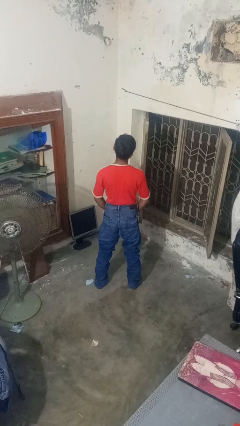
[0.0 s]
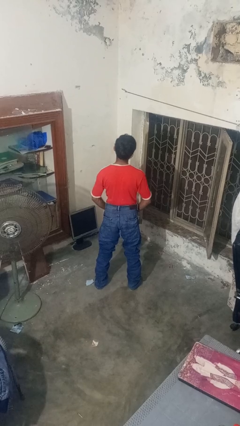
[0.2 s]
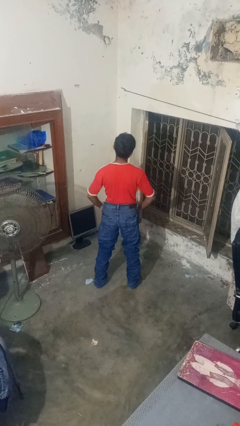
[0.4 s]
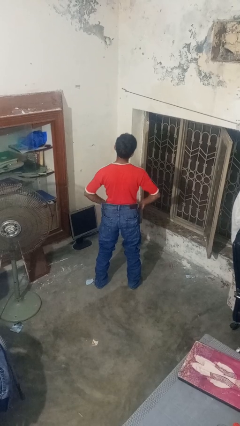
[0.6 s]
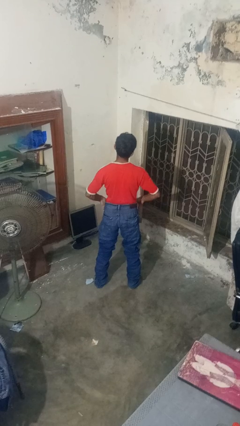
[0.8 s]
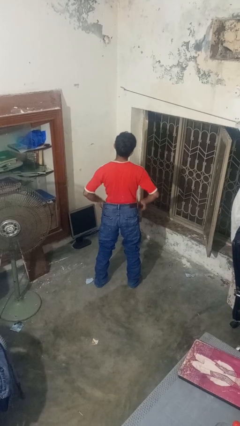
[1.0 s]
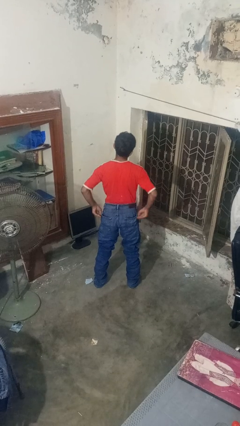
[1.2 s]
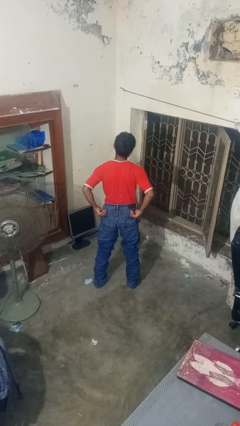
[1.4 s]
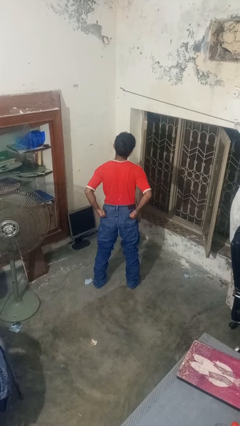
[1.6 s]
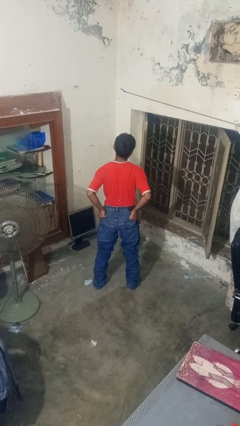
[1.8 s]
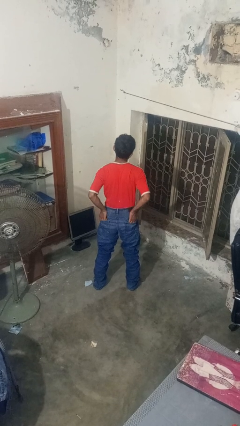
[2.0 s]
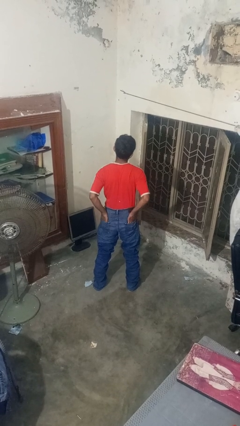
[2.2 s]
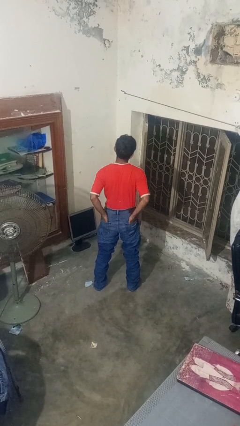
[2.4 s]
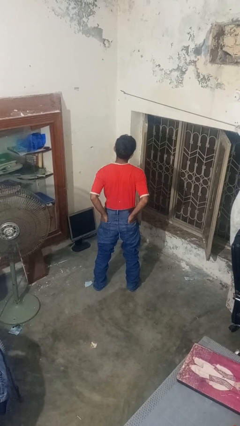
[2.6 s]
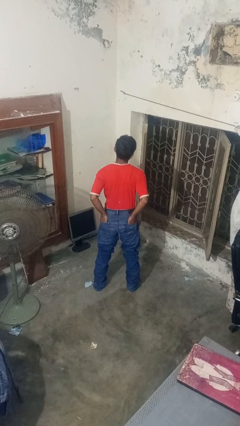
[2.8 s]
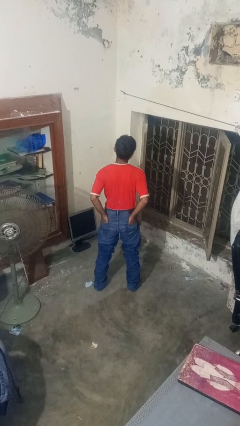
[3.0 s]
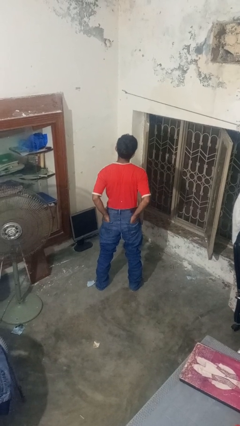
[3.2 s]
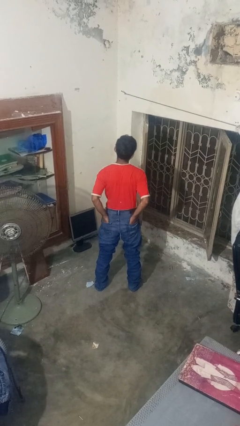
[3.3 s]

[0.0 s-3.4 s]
person puts hands in back pockets

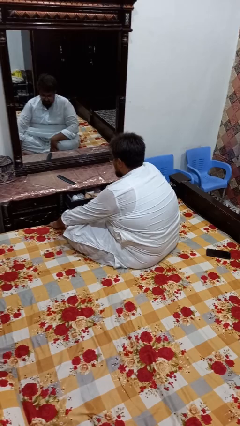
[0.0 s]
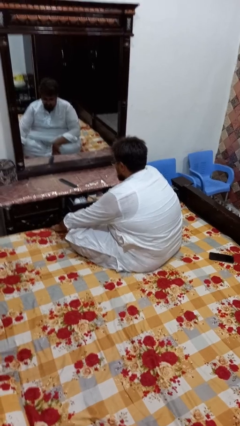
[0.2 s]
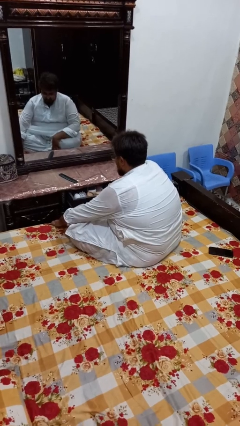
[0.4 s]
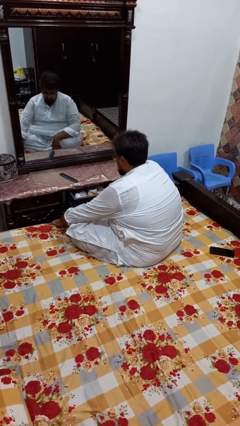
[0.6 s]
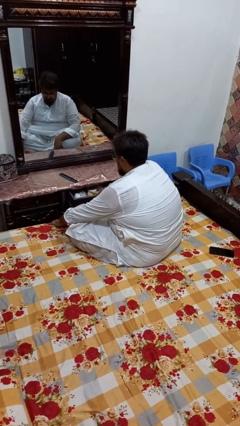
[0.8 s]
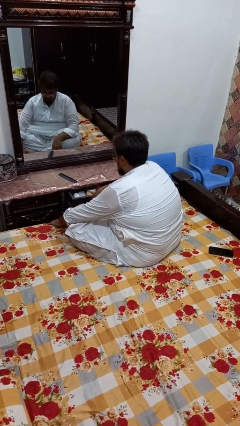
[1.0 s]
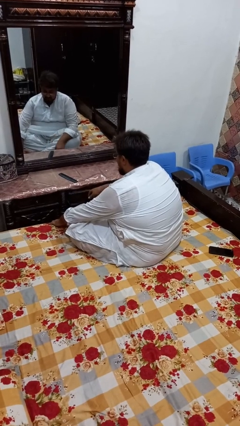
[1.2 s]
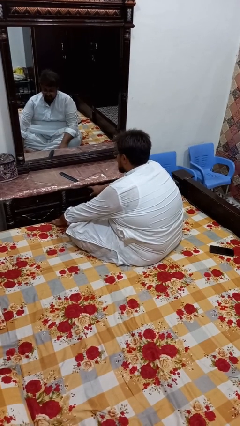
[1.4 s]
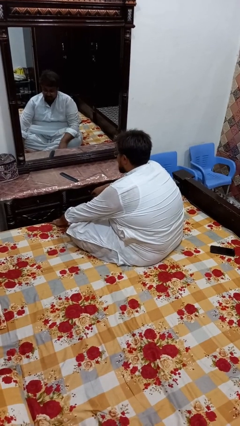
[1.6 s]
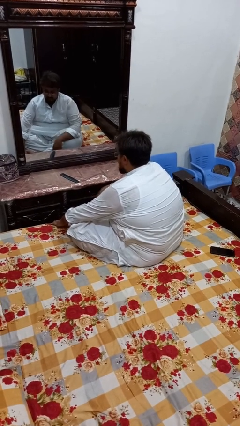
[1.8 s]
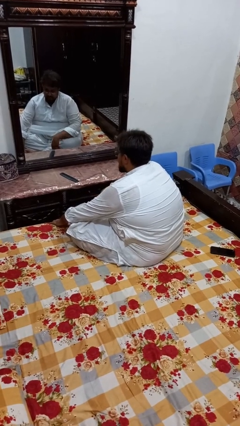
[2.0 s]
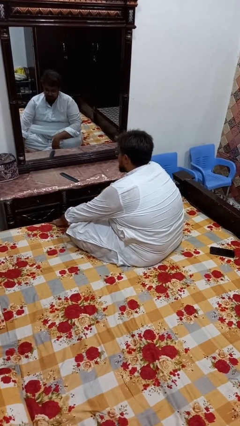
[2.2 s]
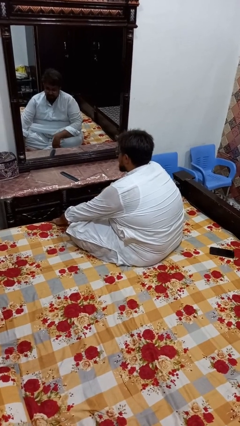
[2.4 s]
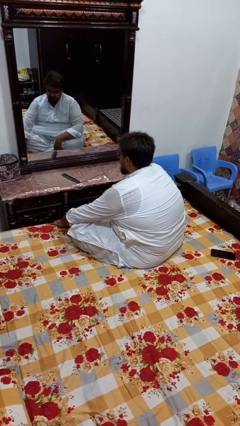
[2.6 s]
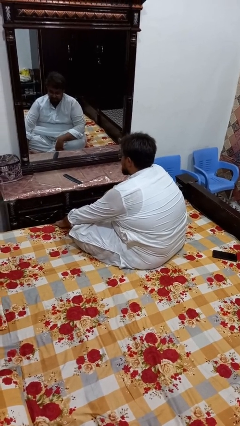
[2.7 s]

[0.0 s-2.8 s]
person closes dresser drawer

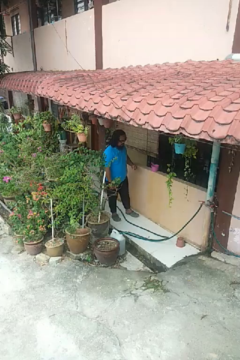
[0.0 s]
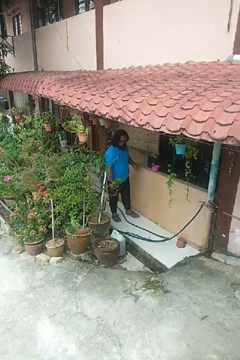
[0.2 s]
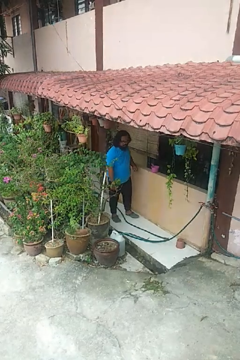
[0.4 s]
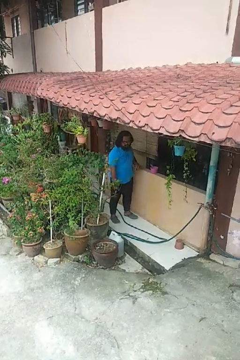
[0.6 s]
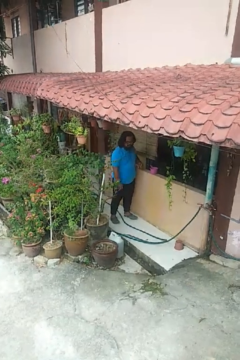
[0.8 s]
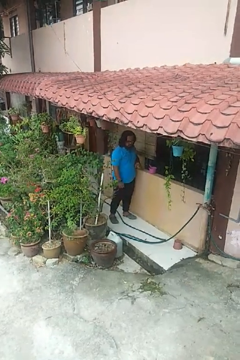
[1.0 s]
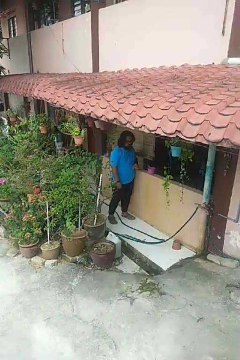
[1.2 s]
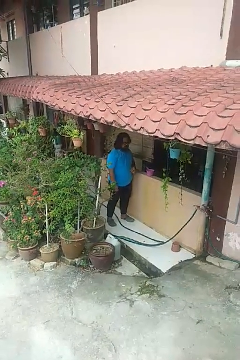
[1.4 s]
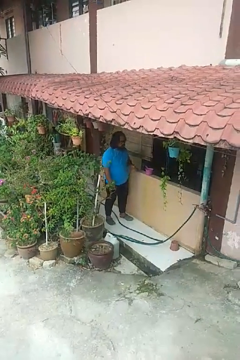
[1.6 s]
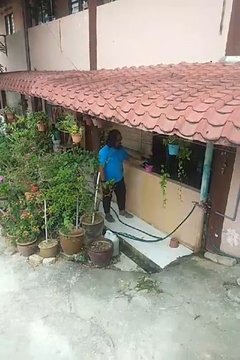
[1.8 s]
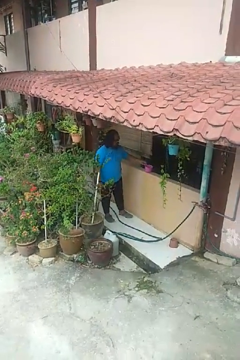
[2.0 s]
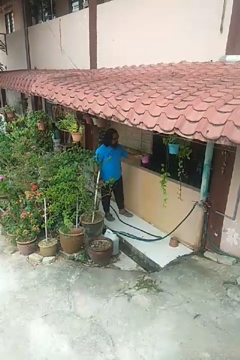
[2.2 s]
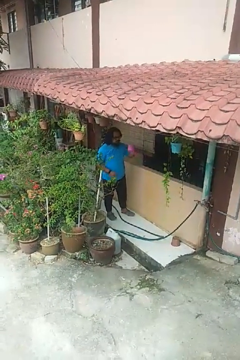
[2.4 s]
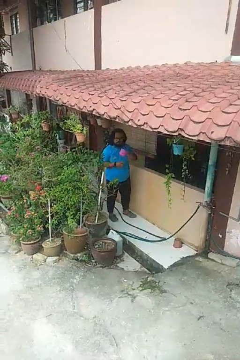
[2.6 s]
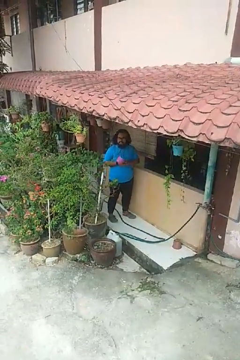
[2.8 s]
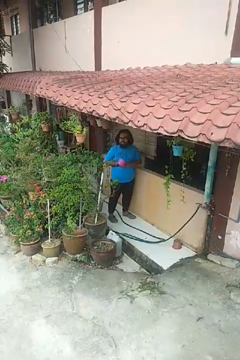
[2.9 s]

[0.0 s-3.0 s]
person picks up object from countertop

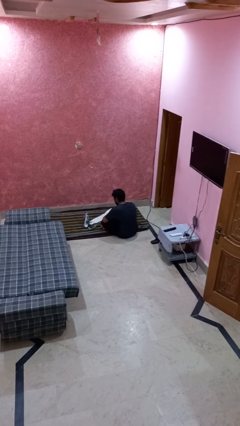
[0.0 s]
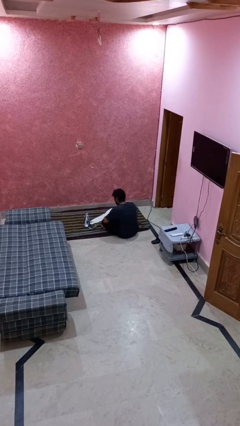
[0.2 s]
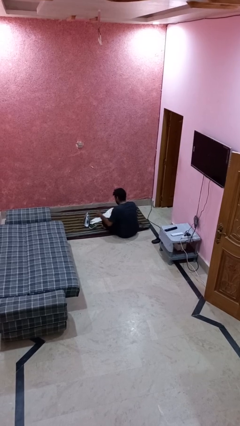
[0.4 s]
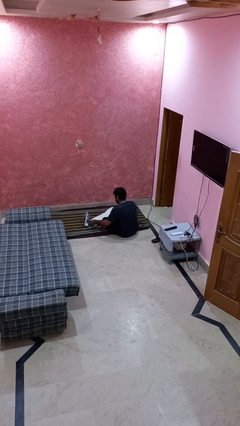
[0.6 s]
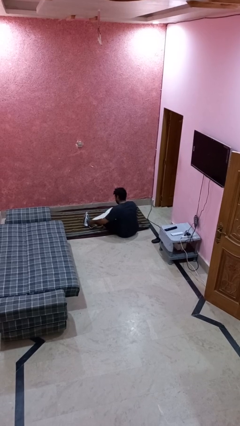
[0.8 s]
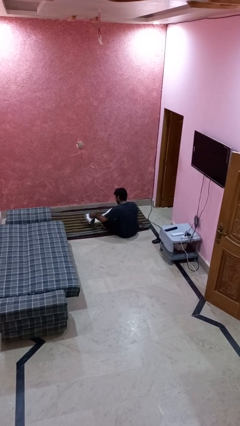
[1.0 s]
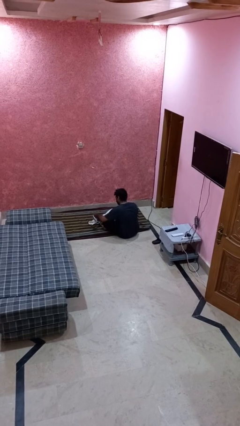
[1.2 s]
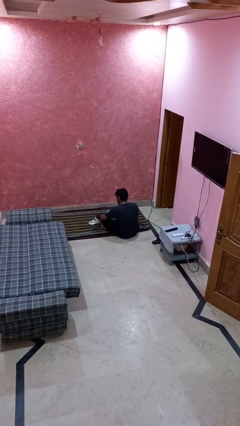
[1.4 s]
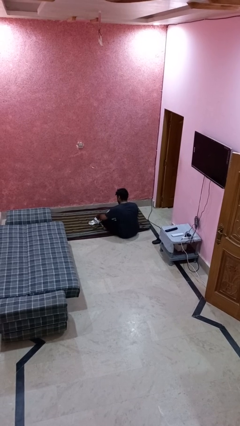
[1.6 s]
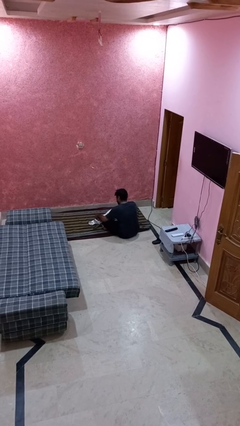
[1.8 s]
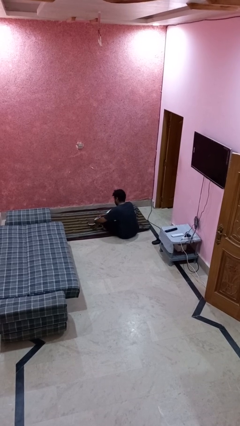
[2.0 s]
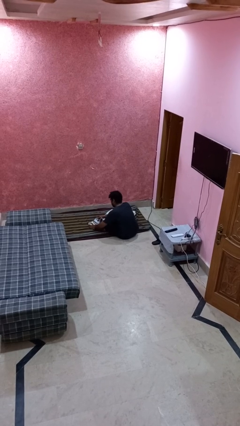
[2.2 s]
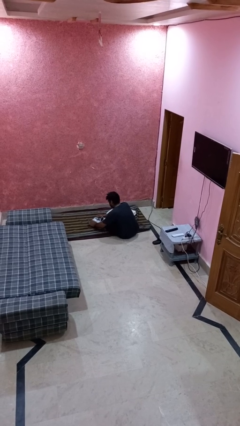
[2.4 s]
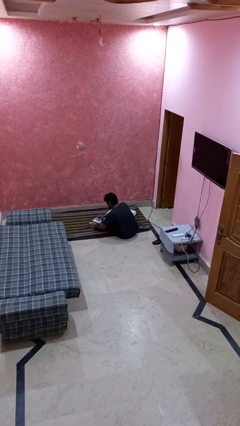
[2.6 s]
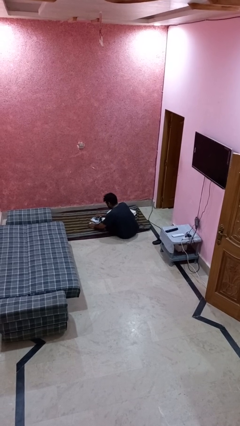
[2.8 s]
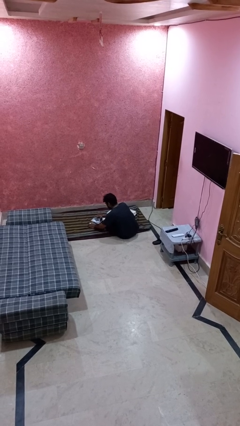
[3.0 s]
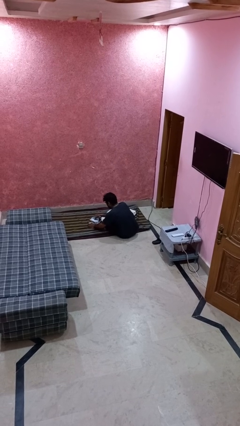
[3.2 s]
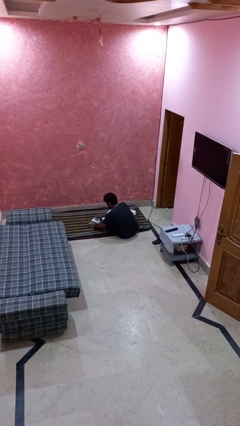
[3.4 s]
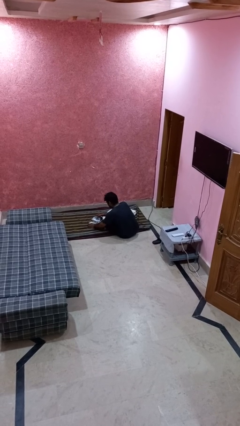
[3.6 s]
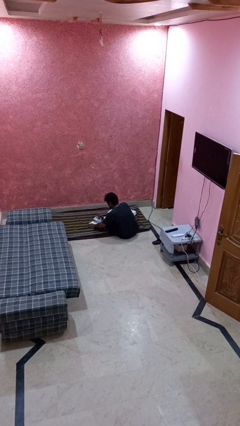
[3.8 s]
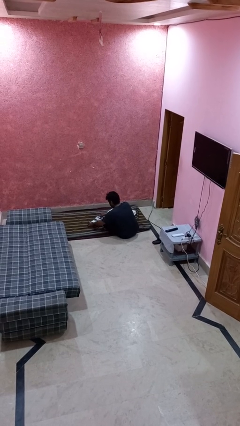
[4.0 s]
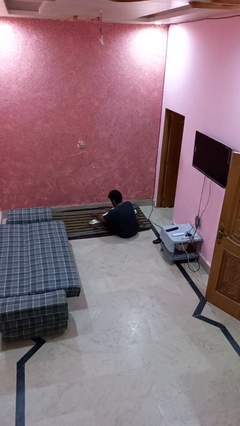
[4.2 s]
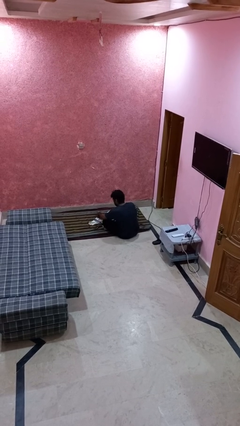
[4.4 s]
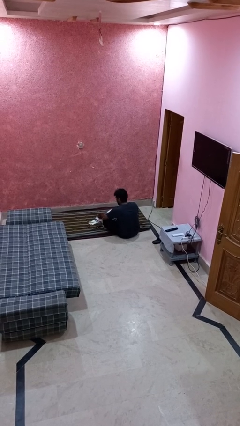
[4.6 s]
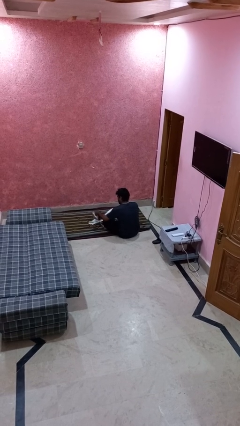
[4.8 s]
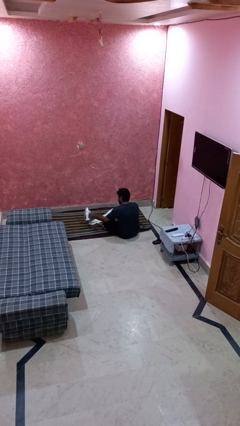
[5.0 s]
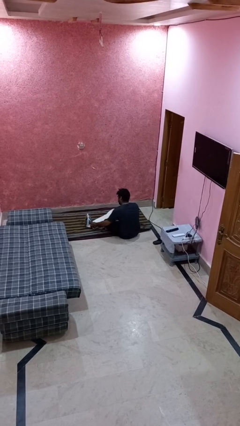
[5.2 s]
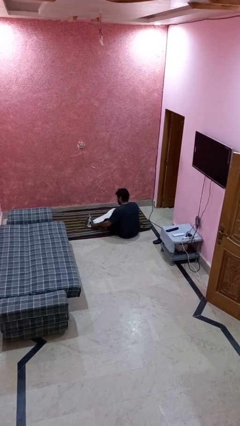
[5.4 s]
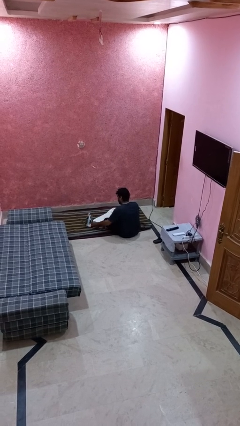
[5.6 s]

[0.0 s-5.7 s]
person irons clothes

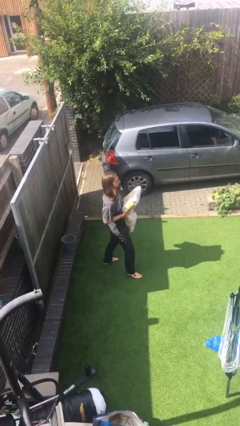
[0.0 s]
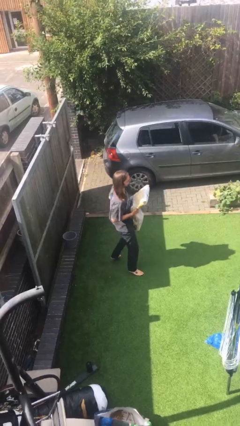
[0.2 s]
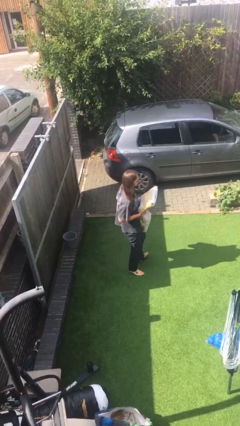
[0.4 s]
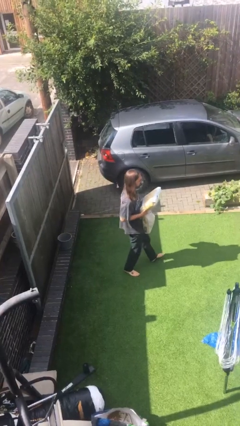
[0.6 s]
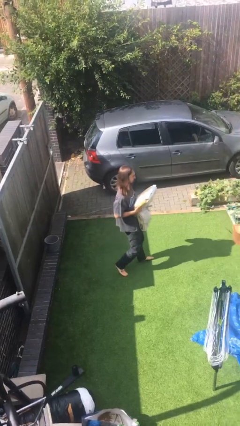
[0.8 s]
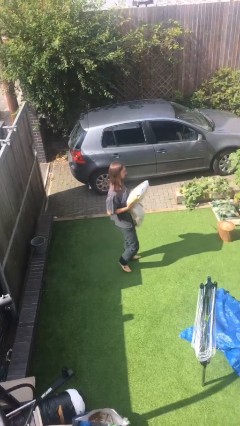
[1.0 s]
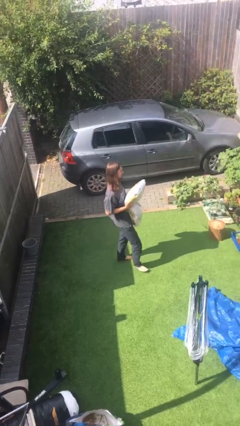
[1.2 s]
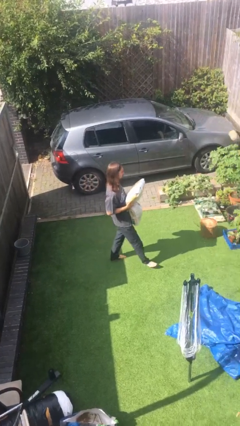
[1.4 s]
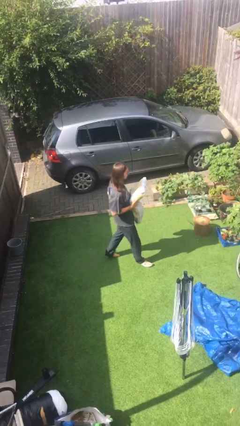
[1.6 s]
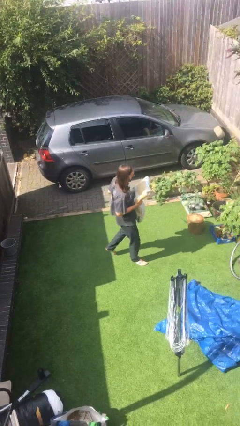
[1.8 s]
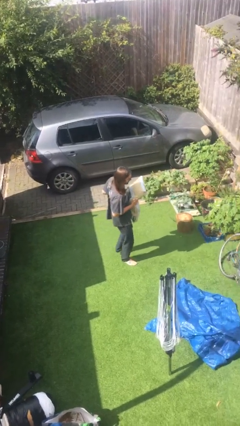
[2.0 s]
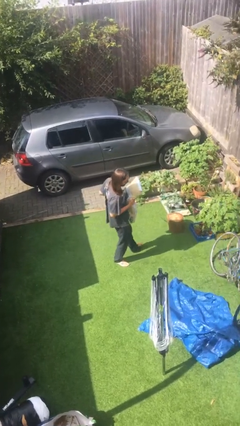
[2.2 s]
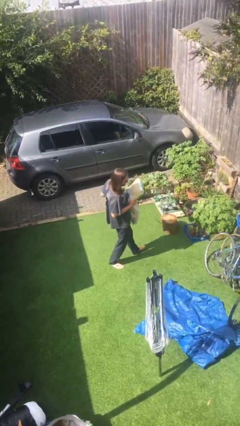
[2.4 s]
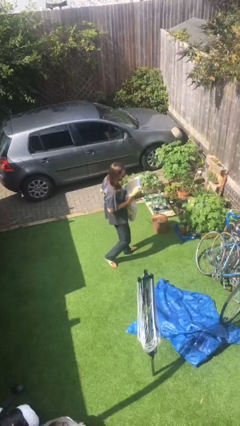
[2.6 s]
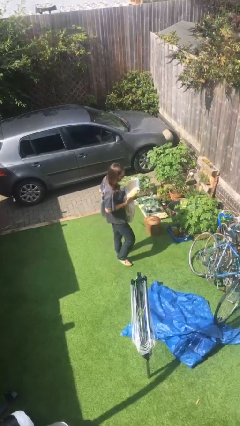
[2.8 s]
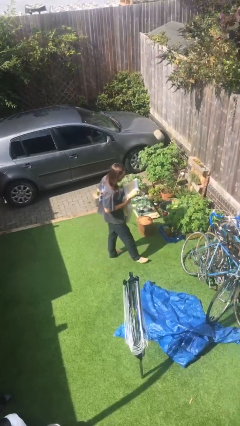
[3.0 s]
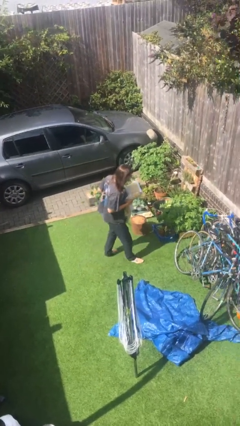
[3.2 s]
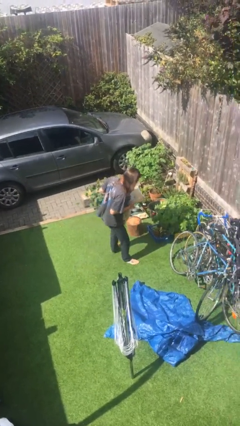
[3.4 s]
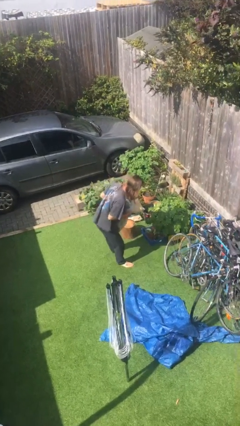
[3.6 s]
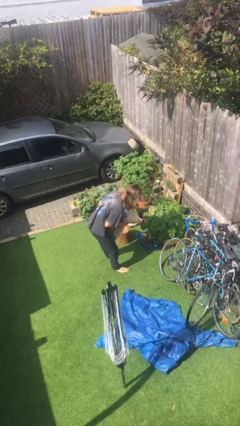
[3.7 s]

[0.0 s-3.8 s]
person carries heavy object

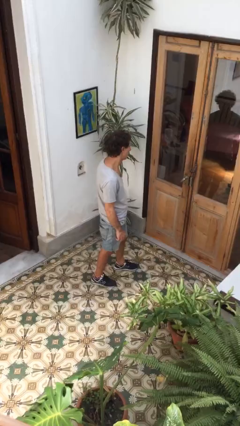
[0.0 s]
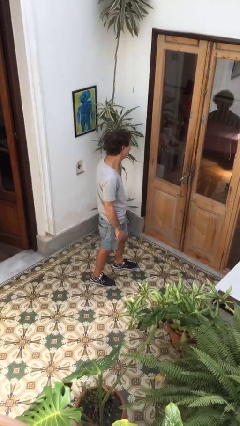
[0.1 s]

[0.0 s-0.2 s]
person opens facility door
